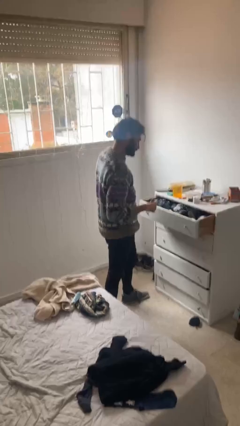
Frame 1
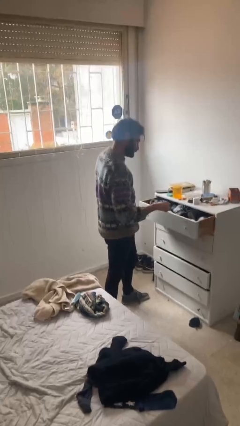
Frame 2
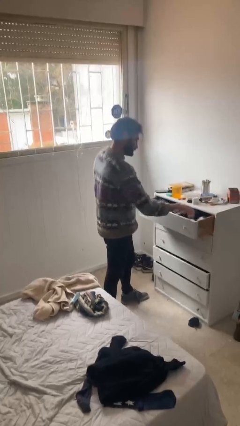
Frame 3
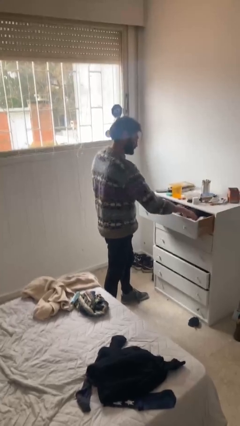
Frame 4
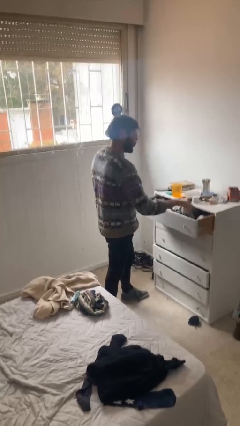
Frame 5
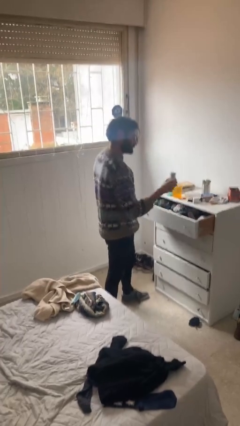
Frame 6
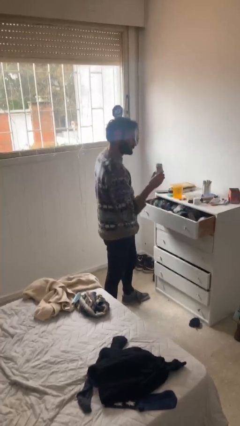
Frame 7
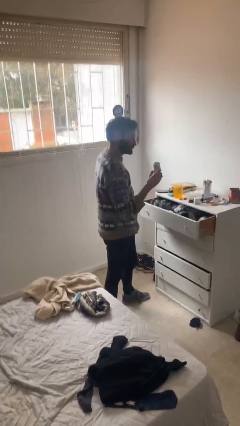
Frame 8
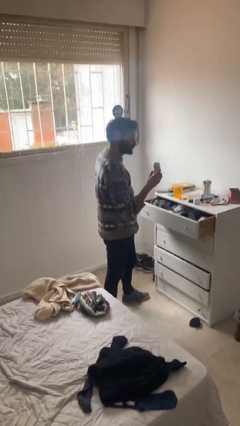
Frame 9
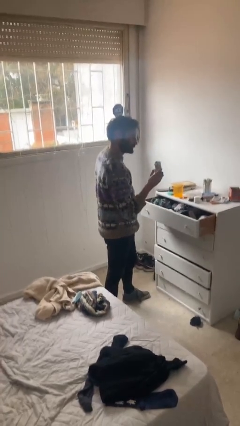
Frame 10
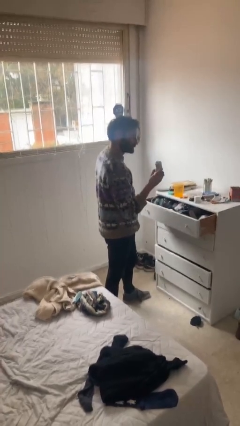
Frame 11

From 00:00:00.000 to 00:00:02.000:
person takes clothes from dresser

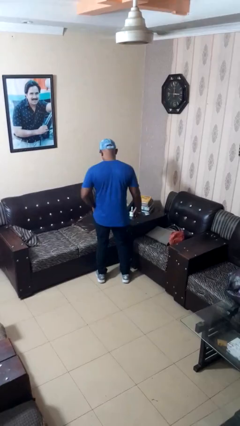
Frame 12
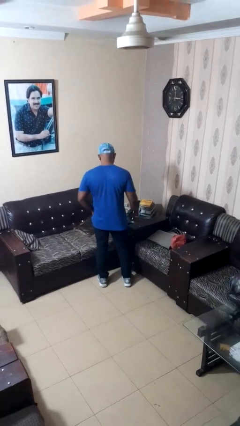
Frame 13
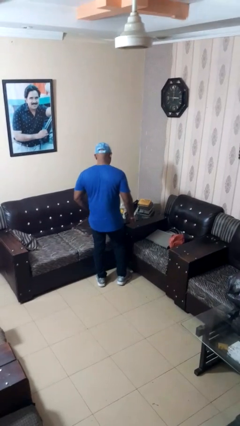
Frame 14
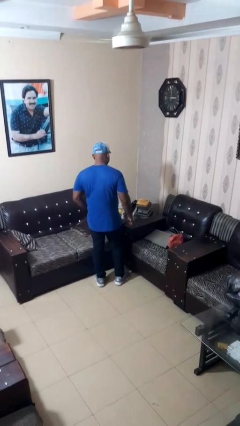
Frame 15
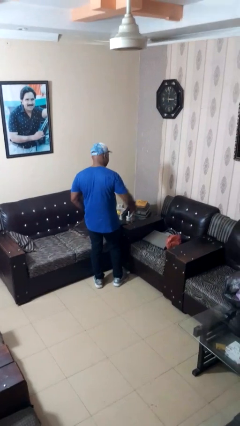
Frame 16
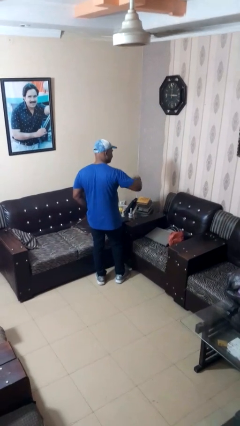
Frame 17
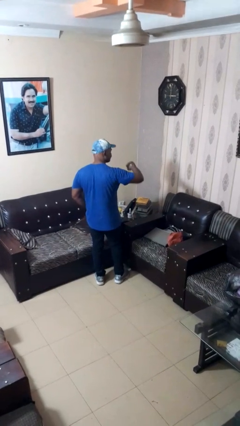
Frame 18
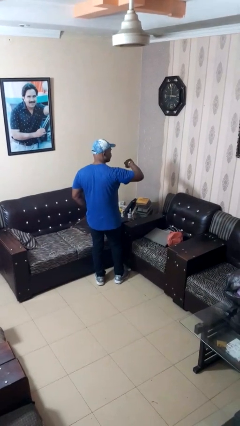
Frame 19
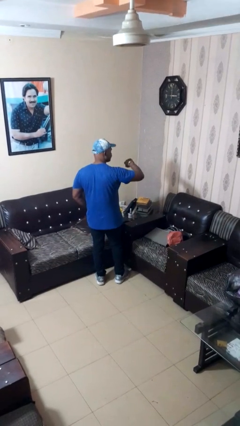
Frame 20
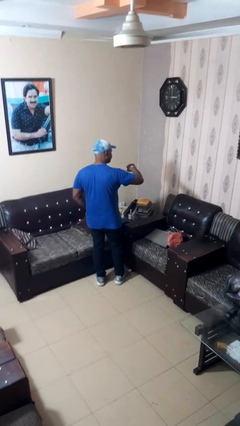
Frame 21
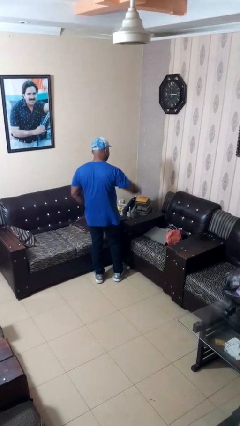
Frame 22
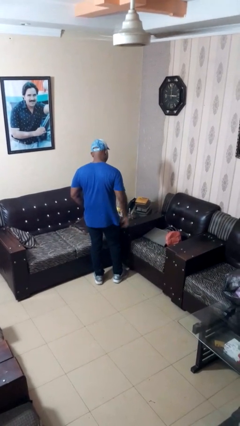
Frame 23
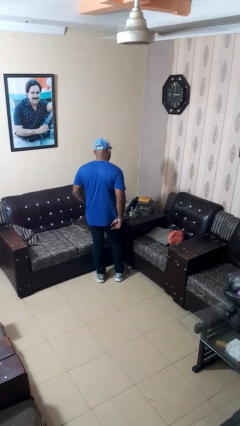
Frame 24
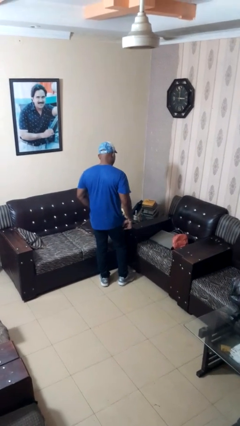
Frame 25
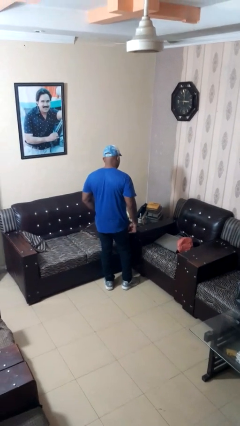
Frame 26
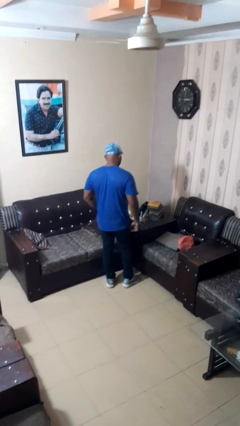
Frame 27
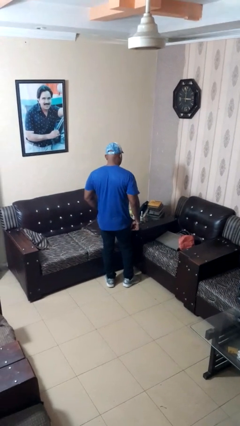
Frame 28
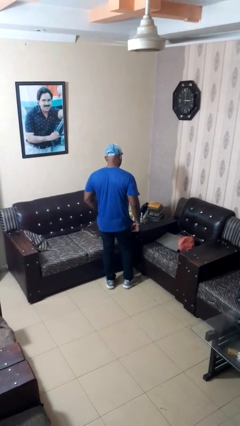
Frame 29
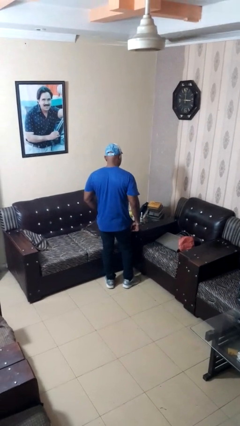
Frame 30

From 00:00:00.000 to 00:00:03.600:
person looks at wristwatch

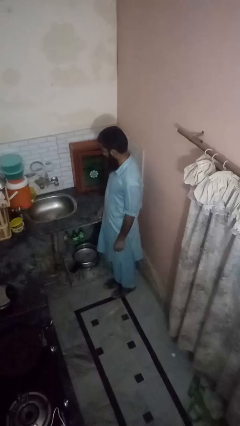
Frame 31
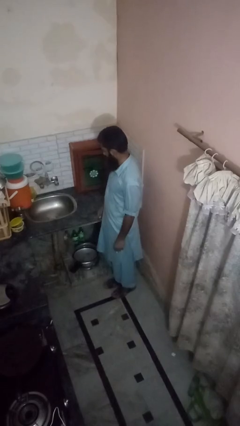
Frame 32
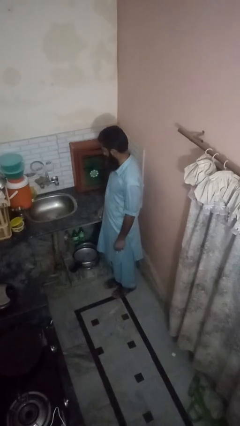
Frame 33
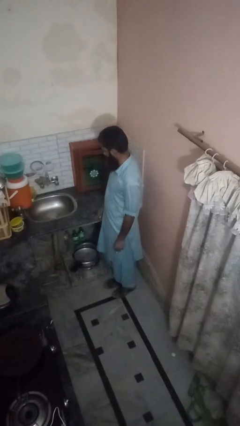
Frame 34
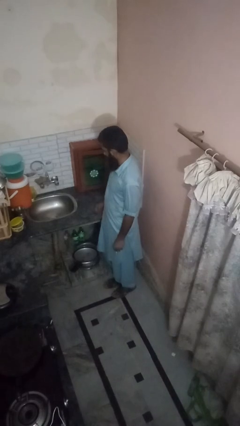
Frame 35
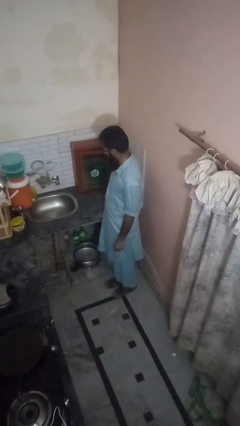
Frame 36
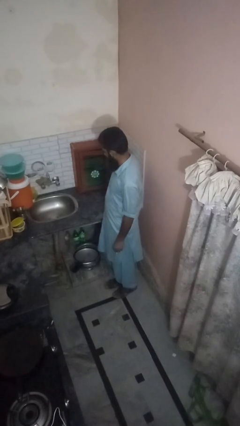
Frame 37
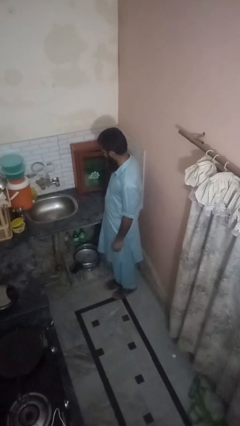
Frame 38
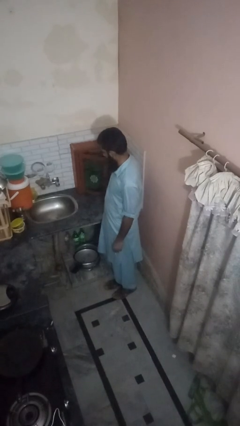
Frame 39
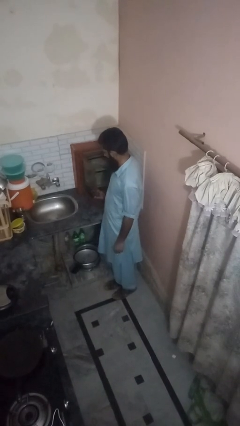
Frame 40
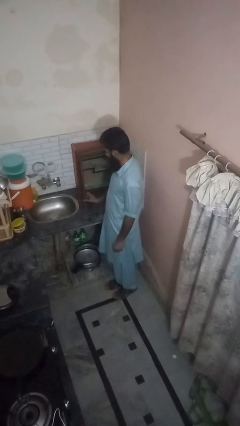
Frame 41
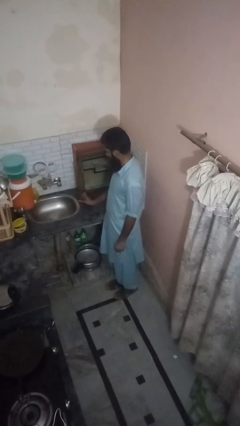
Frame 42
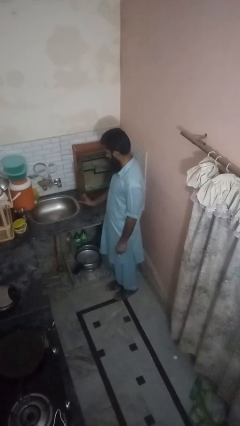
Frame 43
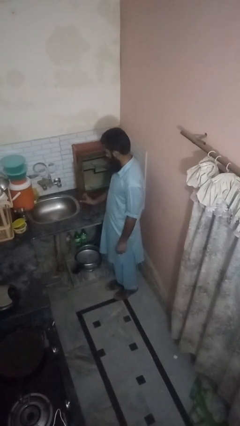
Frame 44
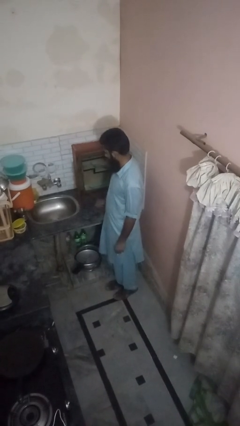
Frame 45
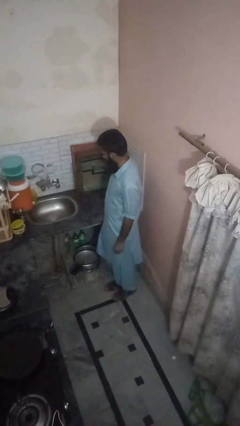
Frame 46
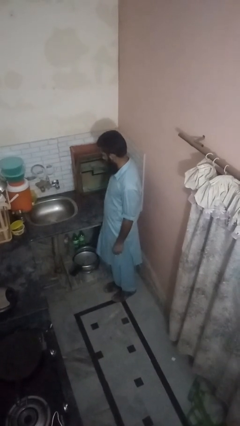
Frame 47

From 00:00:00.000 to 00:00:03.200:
person opens kitchen drawer

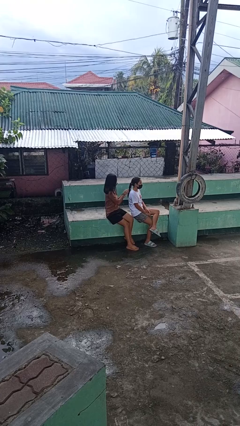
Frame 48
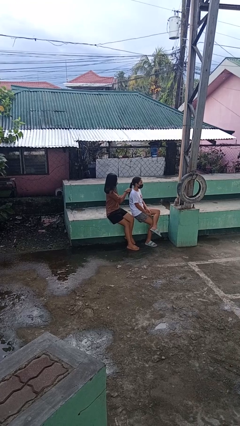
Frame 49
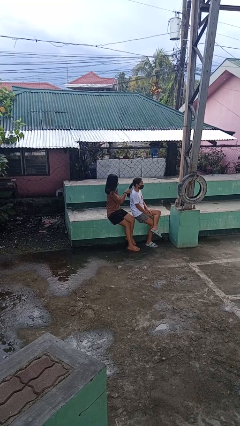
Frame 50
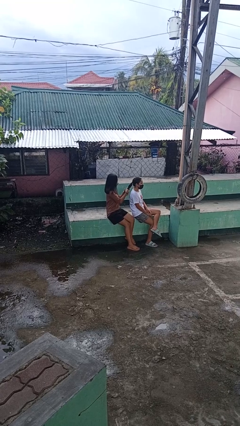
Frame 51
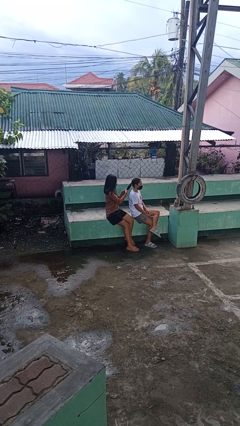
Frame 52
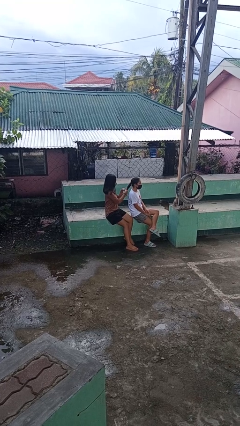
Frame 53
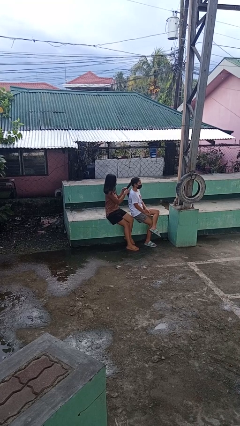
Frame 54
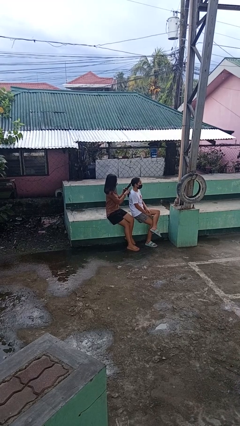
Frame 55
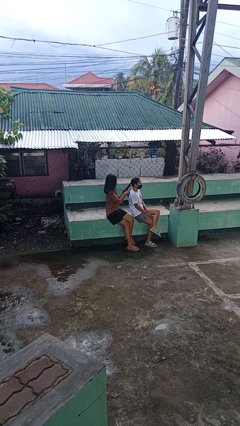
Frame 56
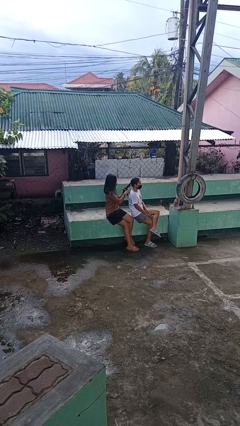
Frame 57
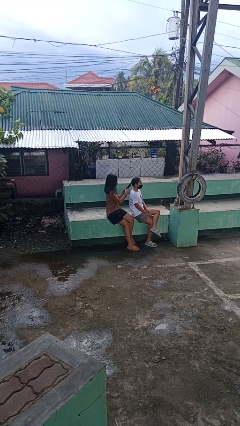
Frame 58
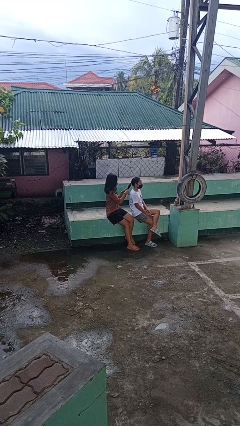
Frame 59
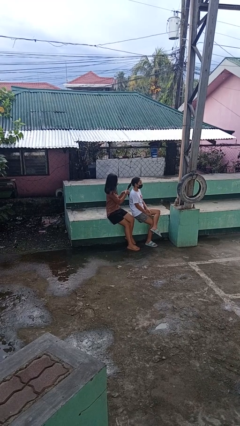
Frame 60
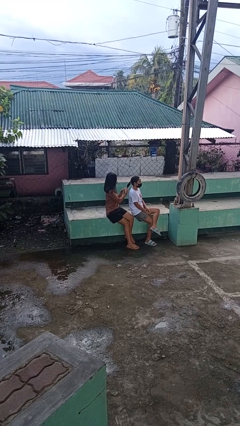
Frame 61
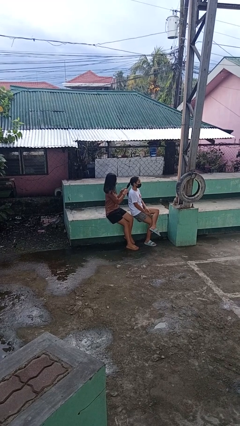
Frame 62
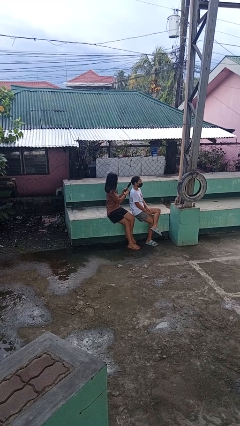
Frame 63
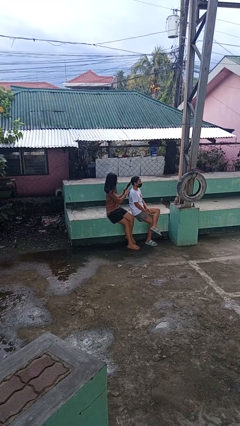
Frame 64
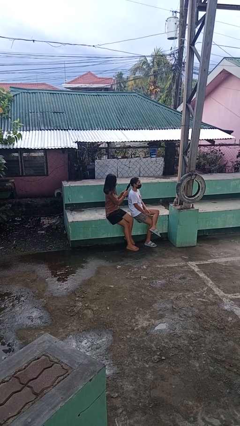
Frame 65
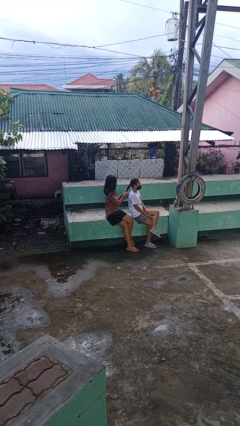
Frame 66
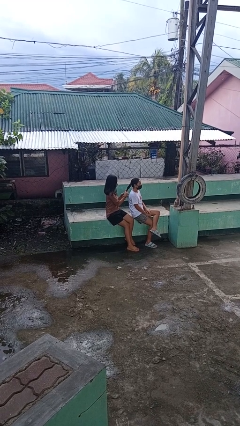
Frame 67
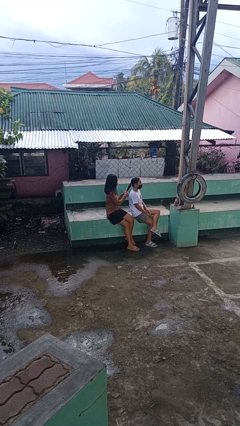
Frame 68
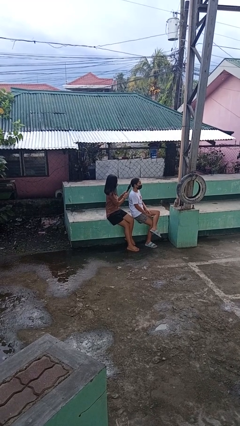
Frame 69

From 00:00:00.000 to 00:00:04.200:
person braids hair of person

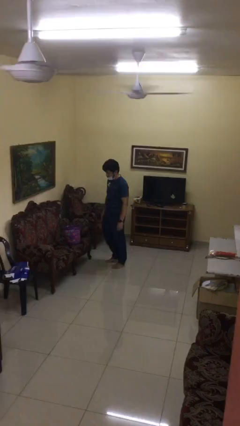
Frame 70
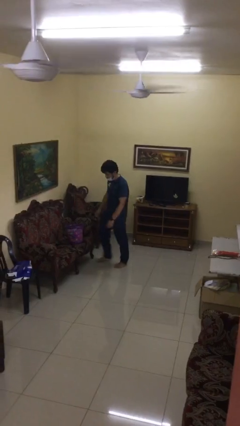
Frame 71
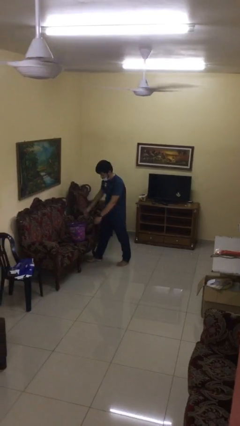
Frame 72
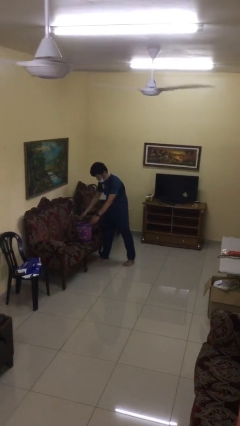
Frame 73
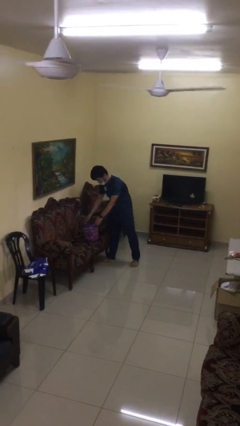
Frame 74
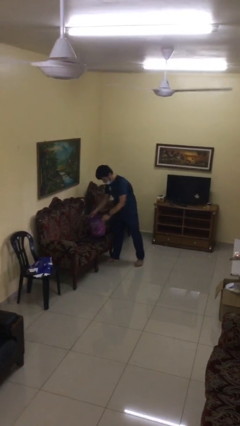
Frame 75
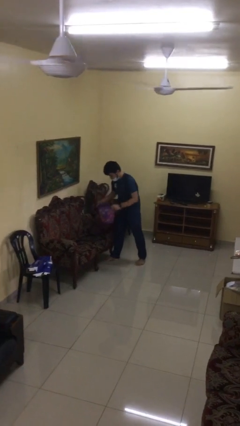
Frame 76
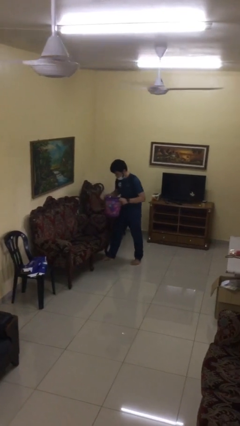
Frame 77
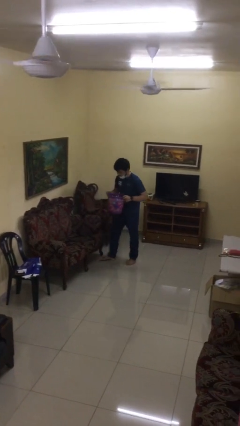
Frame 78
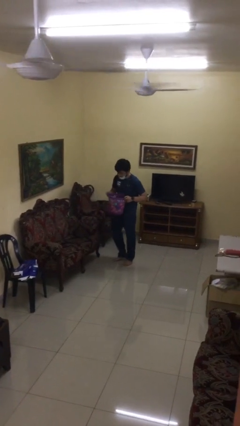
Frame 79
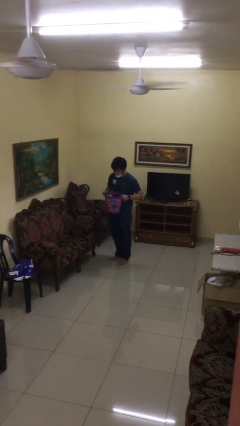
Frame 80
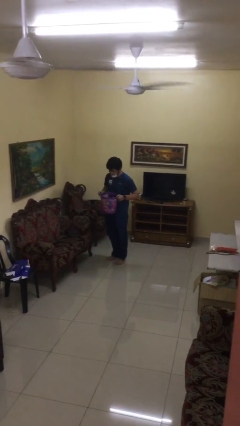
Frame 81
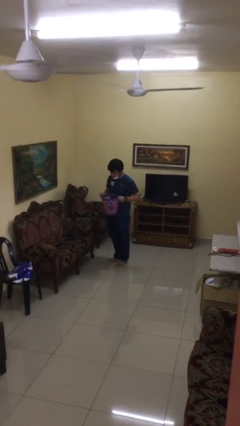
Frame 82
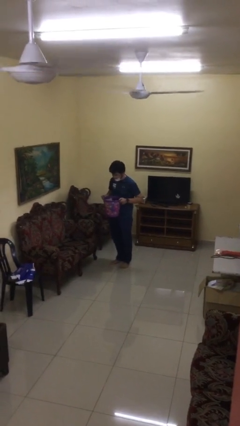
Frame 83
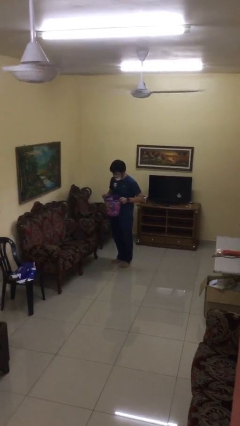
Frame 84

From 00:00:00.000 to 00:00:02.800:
person picks up object from couch

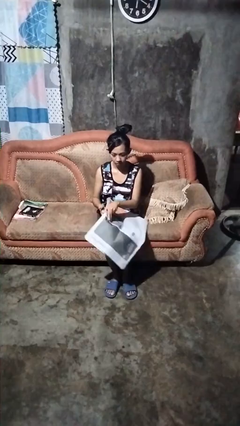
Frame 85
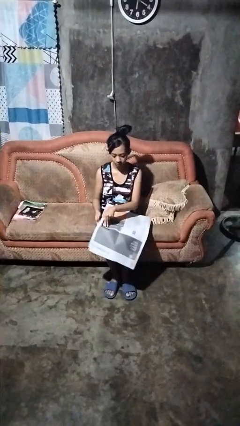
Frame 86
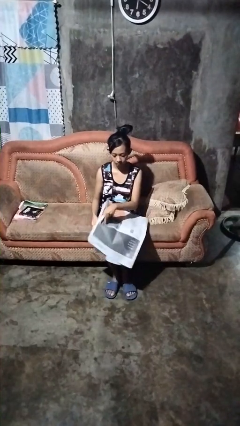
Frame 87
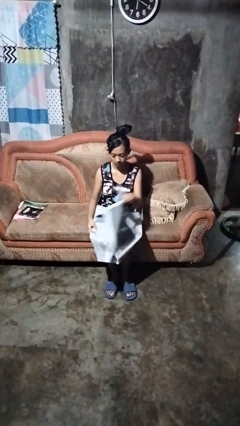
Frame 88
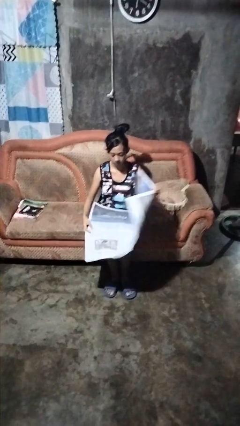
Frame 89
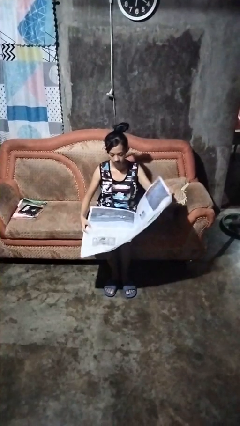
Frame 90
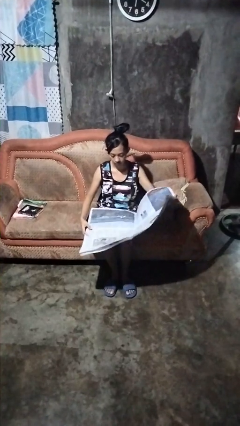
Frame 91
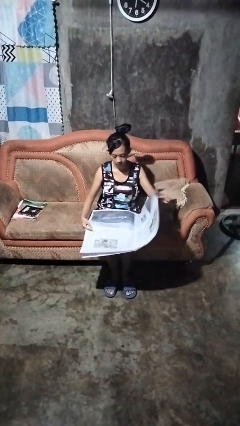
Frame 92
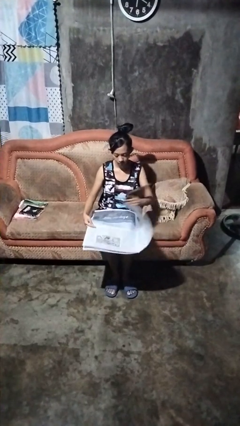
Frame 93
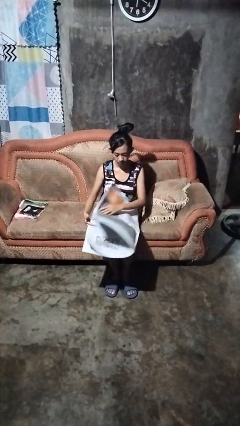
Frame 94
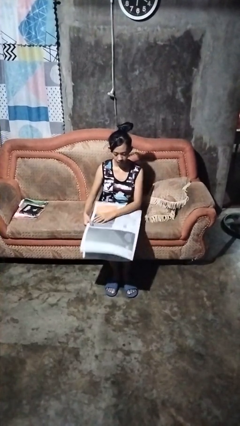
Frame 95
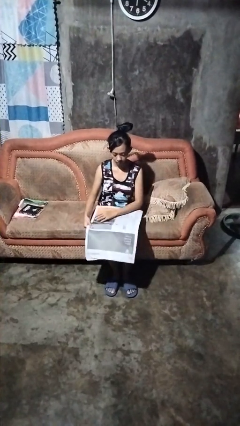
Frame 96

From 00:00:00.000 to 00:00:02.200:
person reads newspaper
